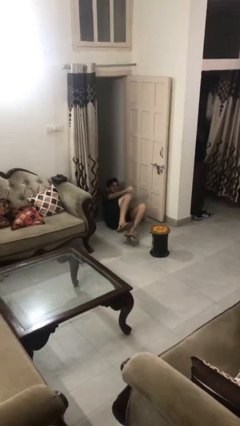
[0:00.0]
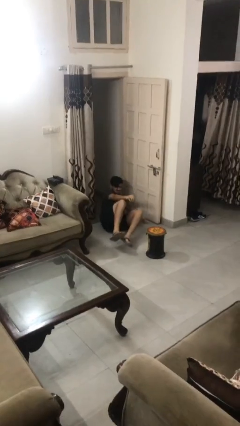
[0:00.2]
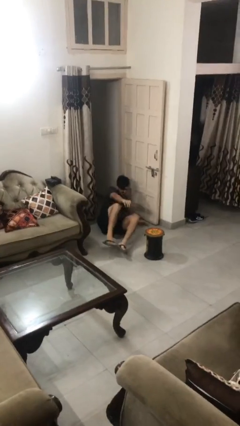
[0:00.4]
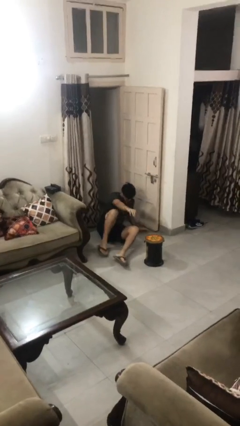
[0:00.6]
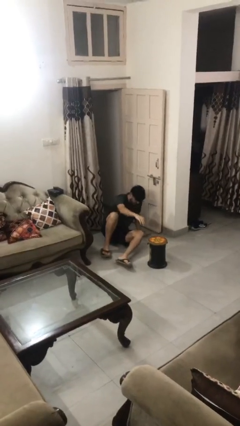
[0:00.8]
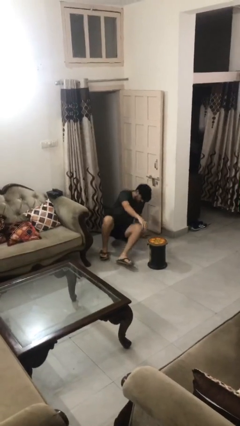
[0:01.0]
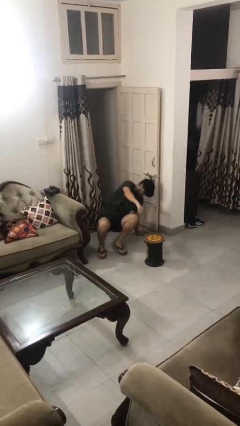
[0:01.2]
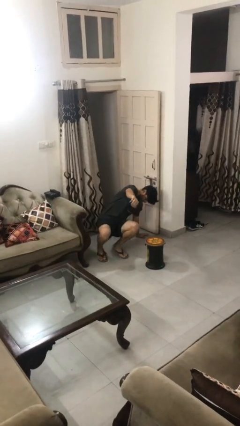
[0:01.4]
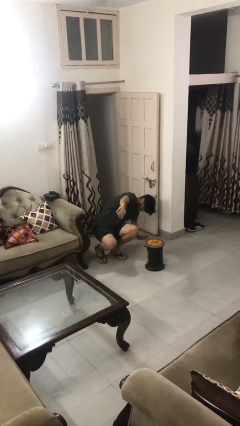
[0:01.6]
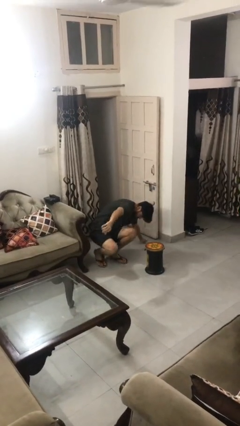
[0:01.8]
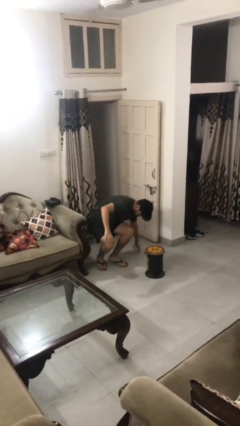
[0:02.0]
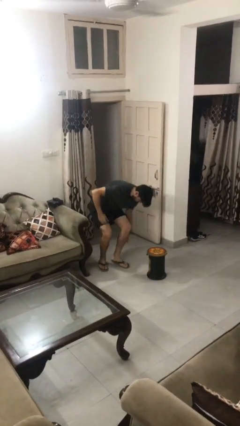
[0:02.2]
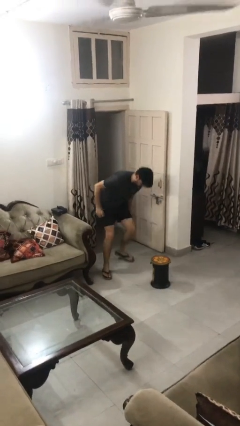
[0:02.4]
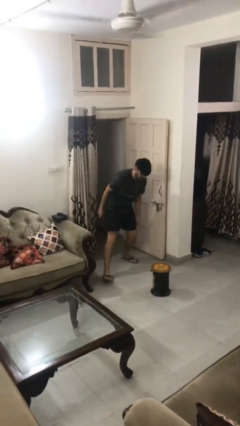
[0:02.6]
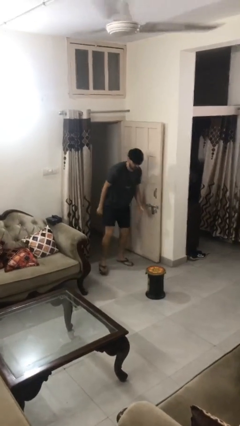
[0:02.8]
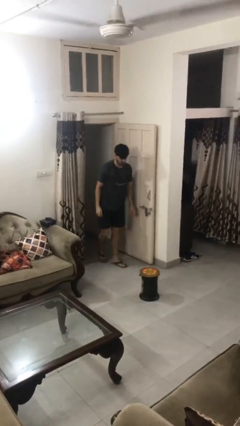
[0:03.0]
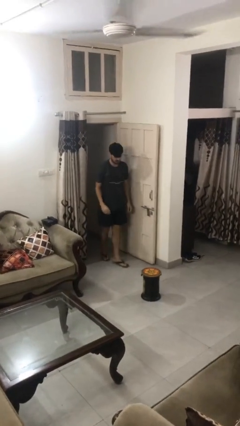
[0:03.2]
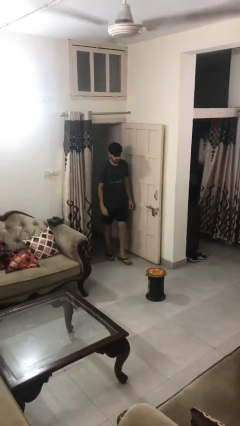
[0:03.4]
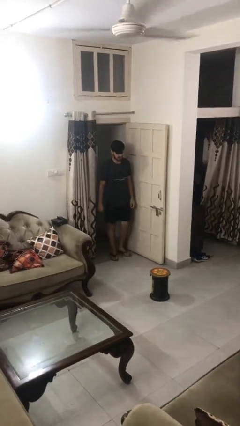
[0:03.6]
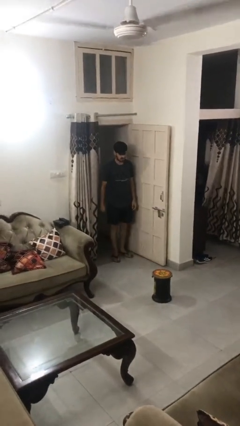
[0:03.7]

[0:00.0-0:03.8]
person stands up from floor

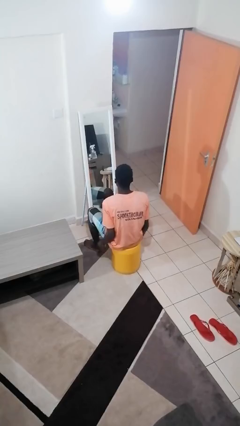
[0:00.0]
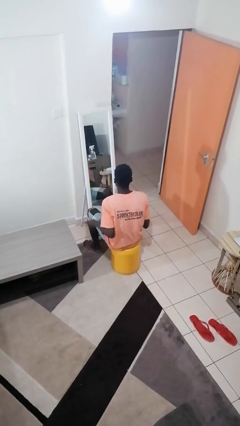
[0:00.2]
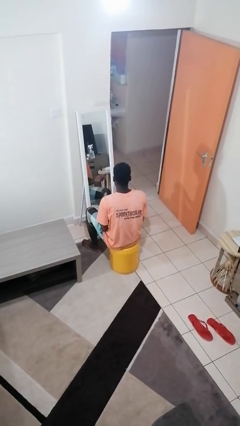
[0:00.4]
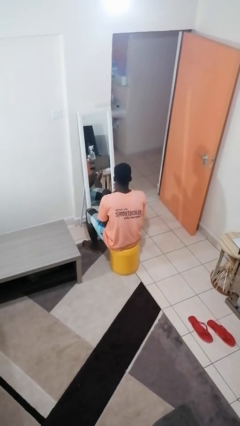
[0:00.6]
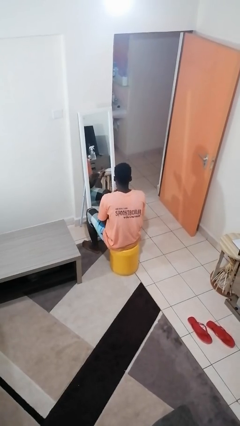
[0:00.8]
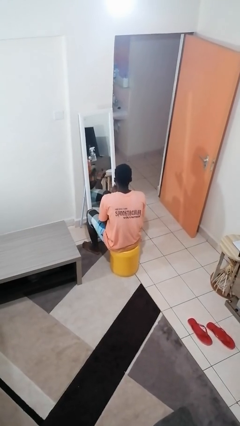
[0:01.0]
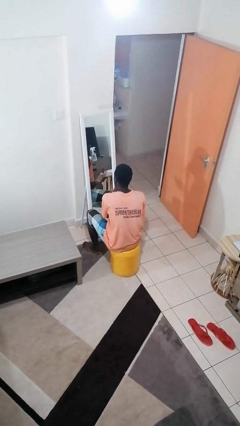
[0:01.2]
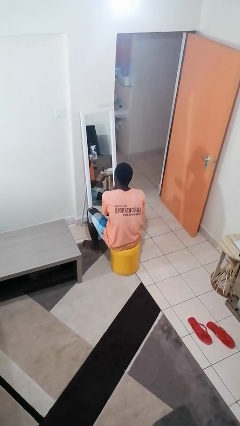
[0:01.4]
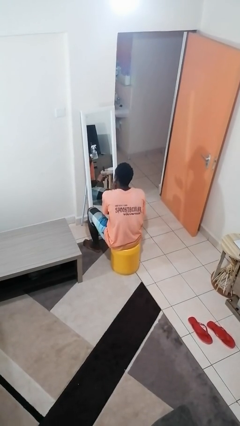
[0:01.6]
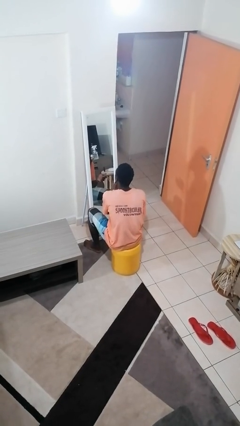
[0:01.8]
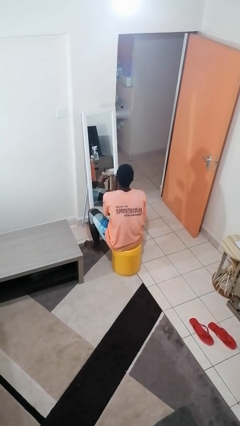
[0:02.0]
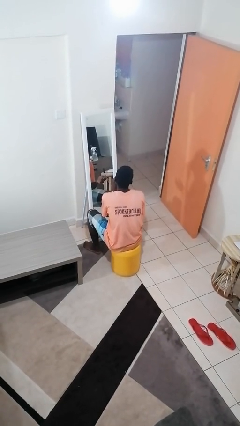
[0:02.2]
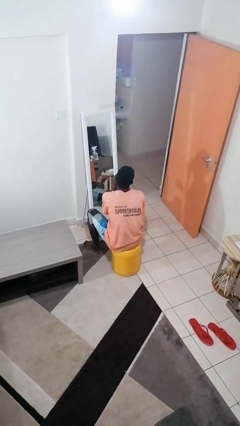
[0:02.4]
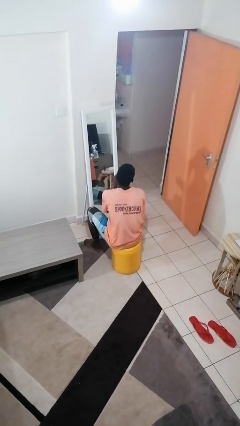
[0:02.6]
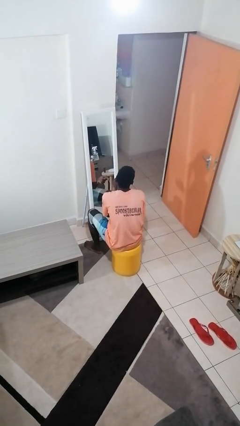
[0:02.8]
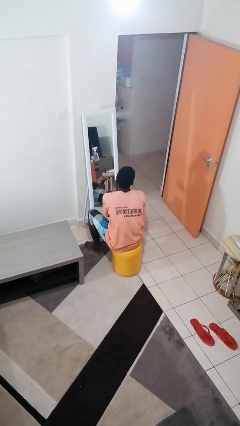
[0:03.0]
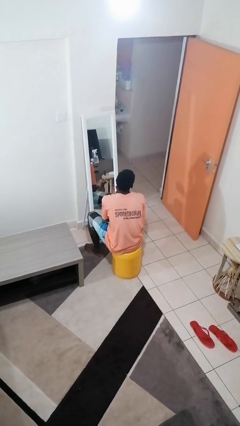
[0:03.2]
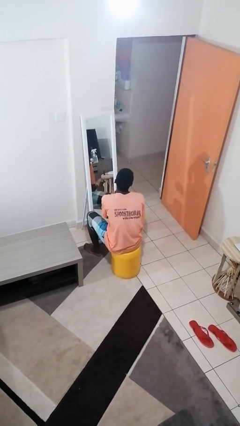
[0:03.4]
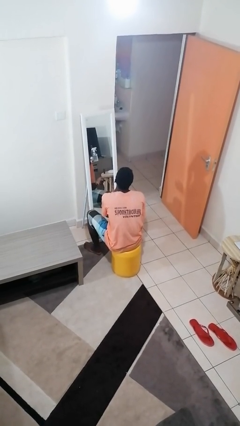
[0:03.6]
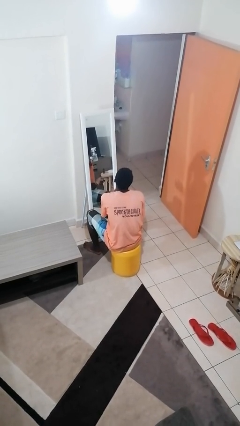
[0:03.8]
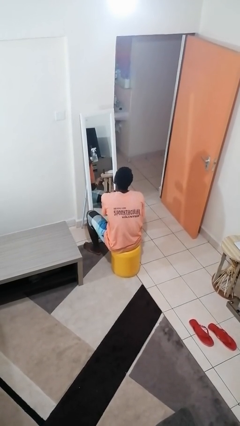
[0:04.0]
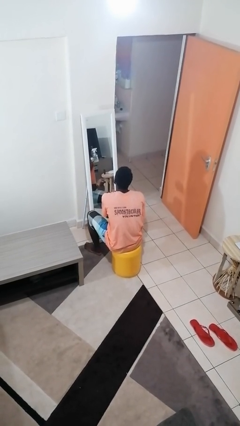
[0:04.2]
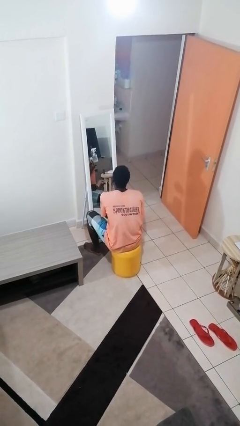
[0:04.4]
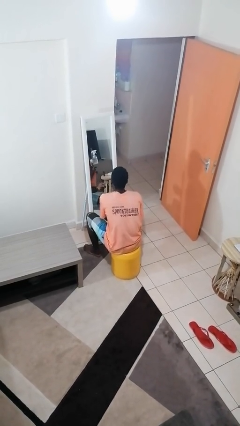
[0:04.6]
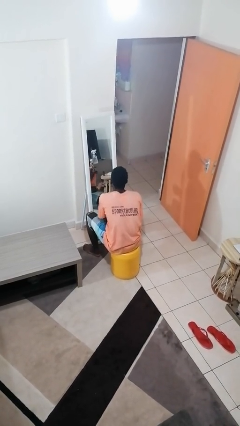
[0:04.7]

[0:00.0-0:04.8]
person applies foundation makeup

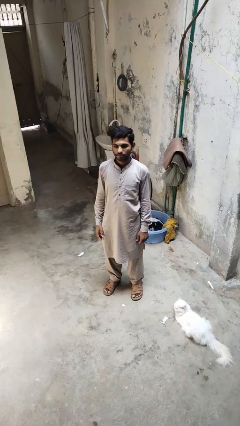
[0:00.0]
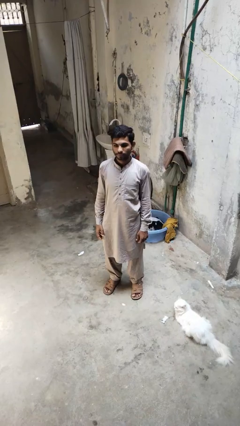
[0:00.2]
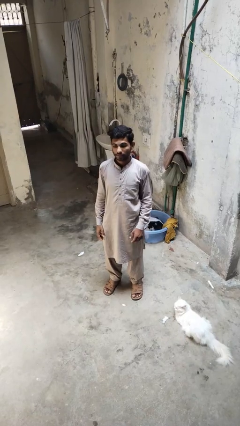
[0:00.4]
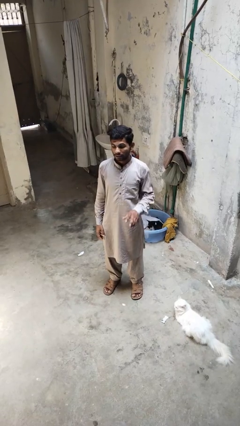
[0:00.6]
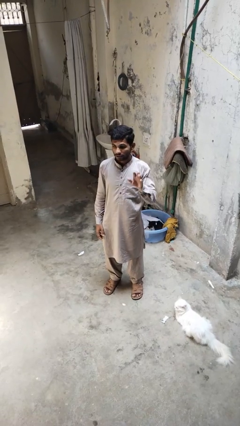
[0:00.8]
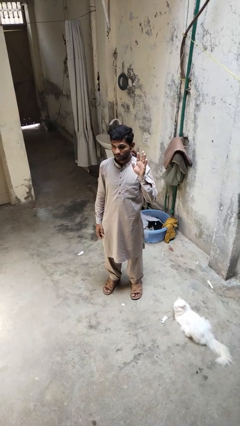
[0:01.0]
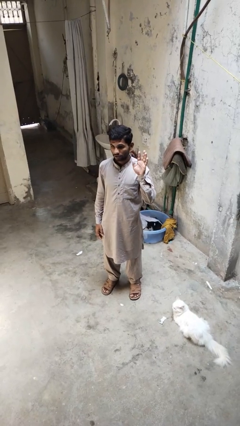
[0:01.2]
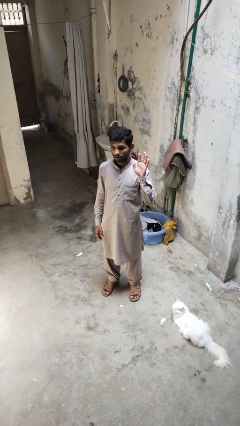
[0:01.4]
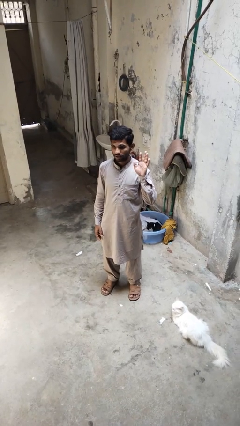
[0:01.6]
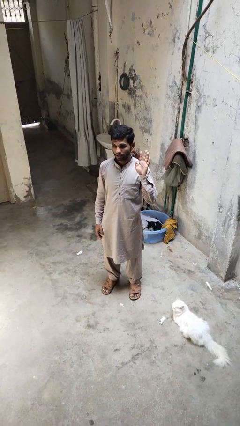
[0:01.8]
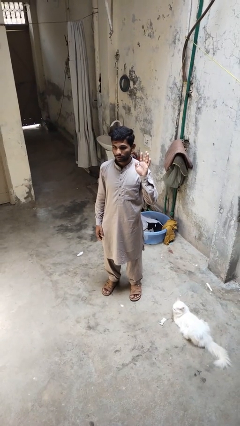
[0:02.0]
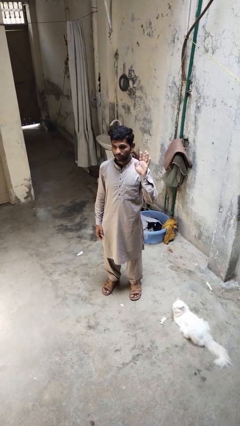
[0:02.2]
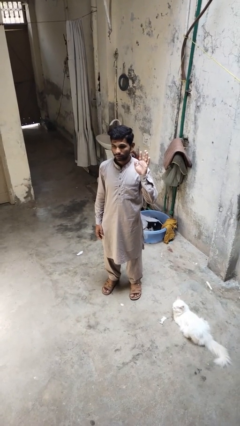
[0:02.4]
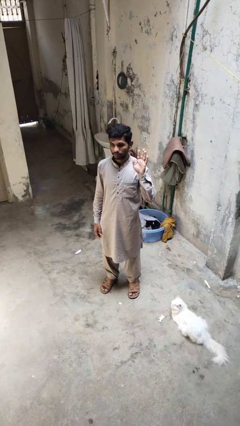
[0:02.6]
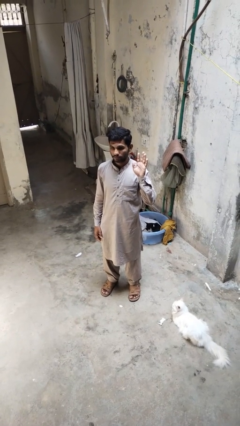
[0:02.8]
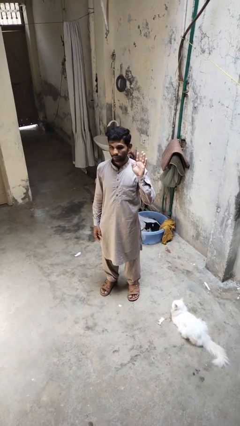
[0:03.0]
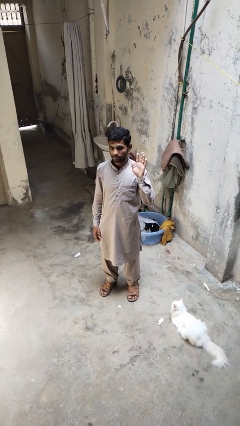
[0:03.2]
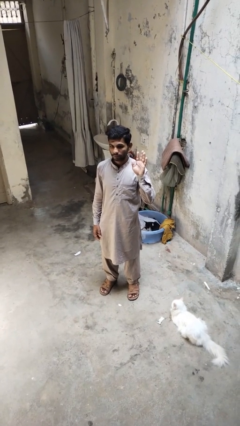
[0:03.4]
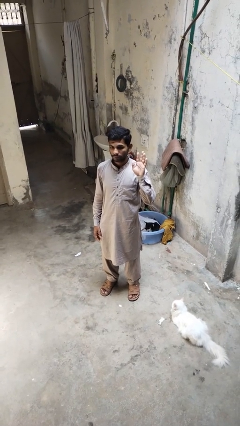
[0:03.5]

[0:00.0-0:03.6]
person gestures raise hand

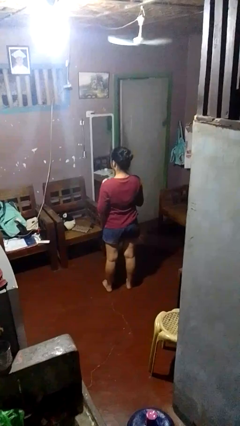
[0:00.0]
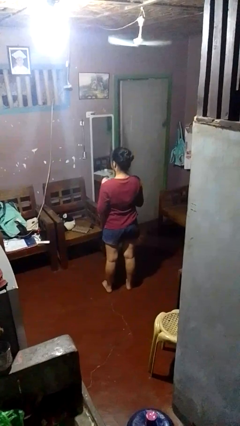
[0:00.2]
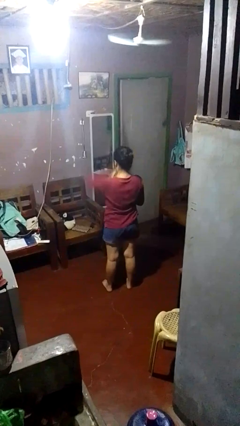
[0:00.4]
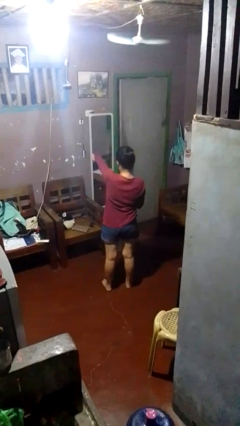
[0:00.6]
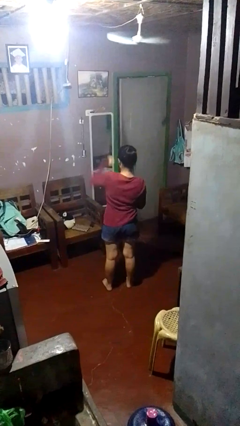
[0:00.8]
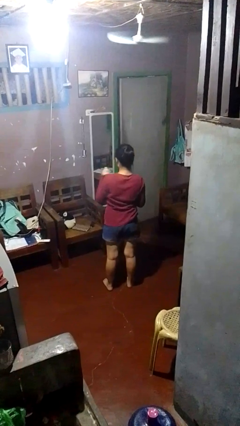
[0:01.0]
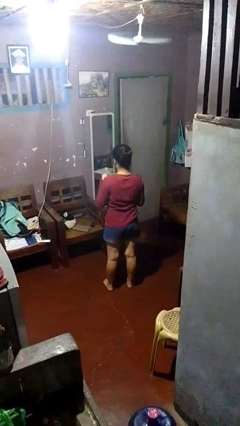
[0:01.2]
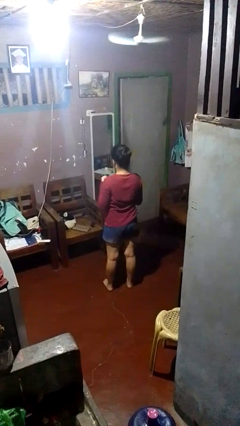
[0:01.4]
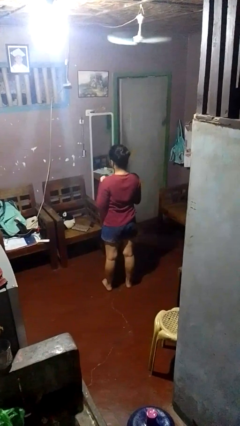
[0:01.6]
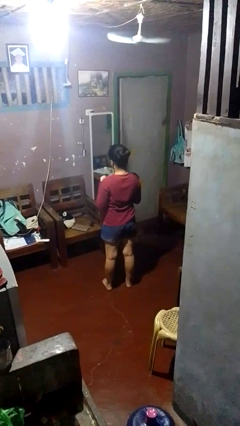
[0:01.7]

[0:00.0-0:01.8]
person punches

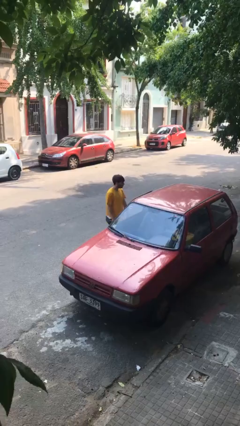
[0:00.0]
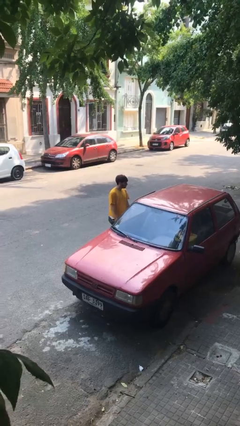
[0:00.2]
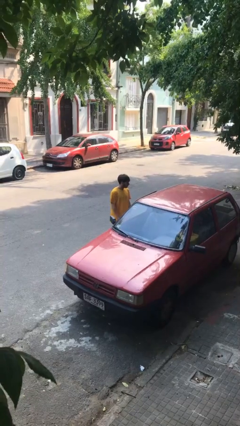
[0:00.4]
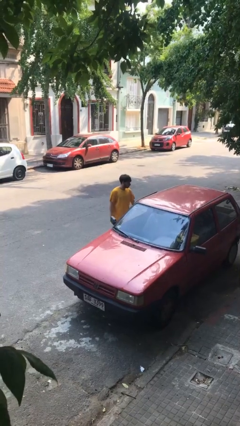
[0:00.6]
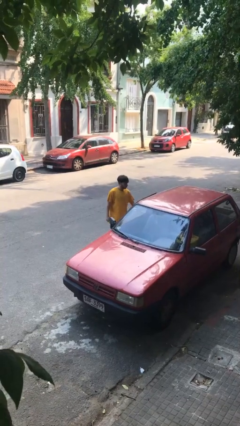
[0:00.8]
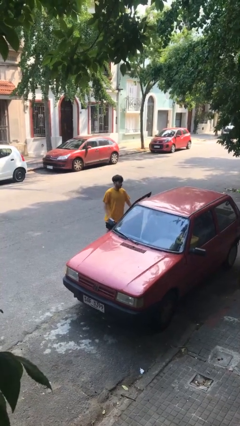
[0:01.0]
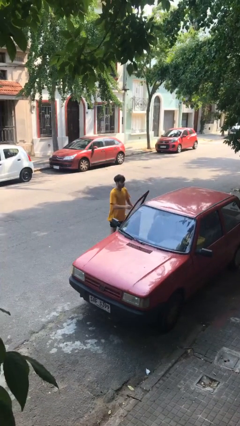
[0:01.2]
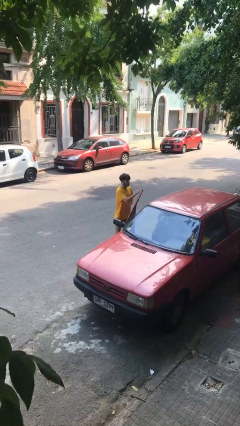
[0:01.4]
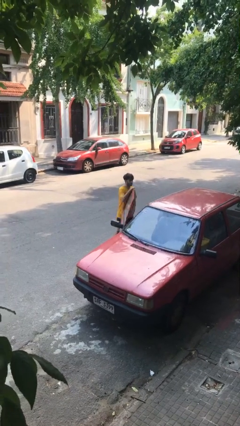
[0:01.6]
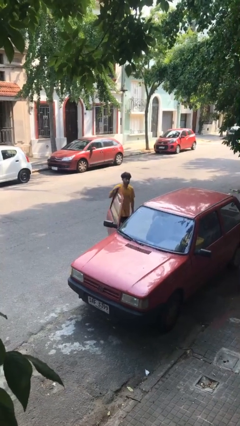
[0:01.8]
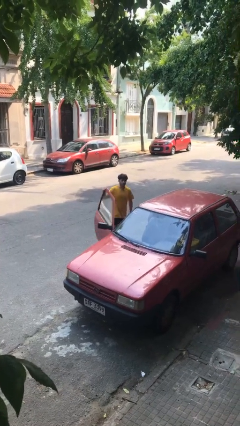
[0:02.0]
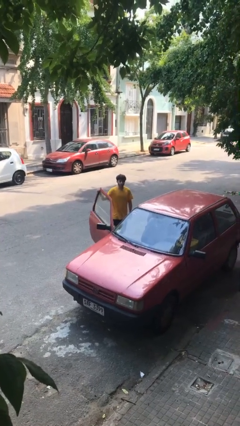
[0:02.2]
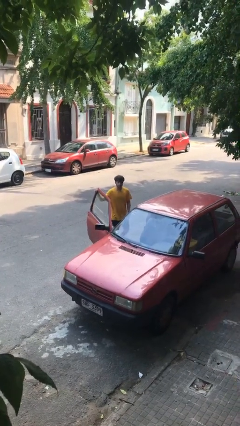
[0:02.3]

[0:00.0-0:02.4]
person opens car door

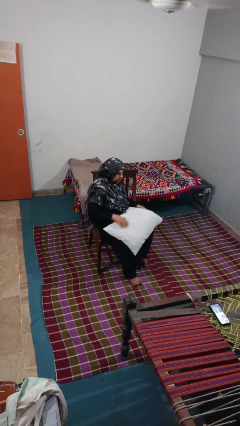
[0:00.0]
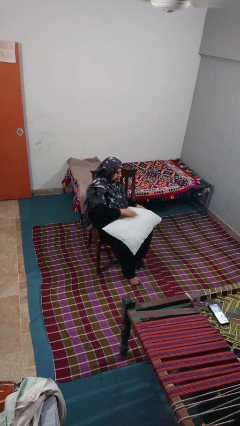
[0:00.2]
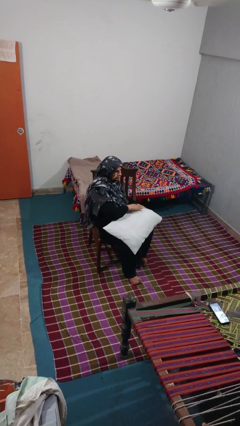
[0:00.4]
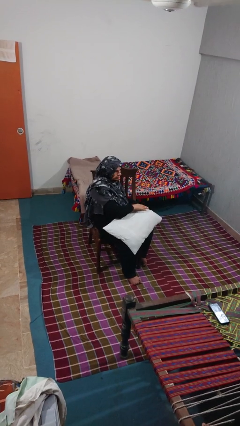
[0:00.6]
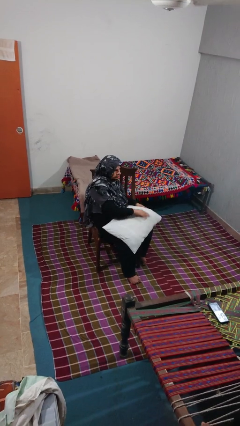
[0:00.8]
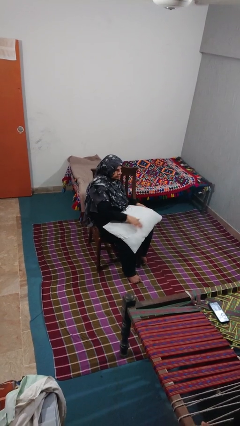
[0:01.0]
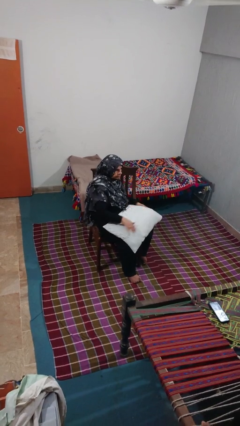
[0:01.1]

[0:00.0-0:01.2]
person waves hand over object
